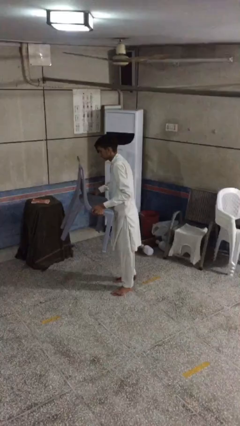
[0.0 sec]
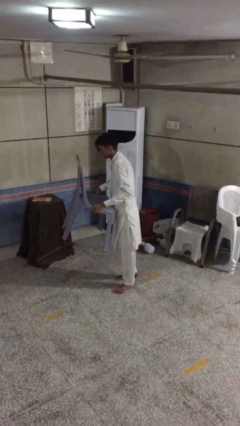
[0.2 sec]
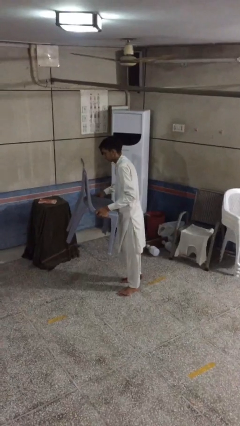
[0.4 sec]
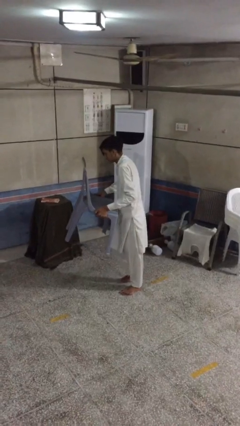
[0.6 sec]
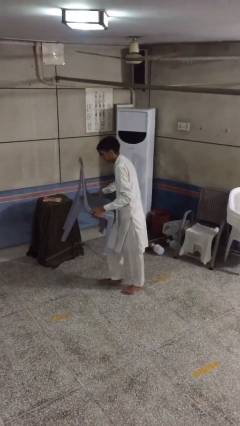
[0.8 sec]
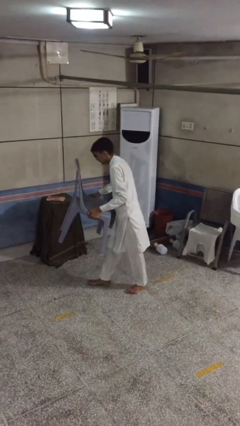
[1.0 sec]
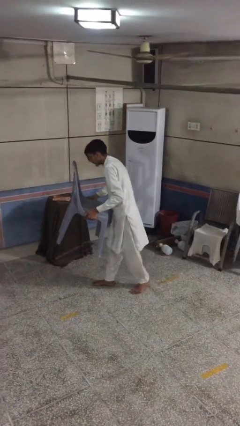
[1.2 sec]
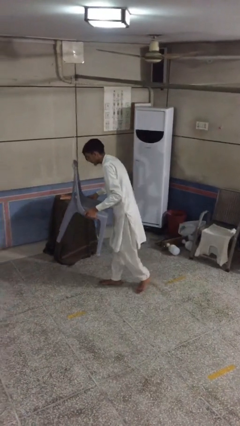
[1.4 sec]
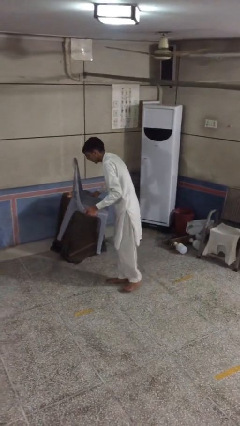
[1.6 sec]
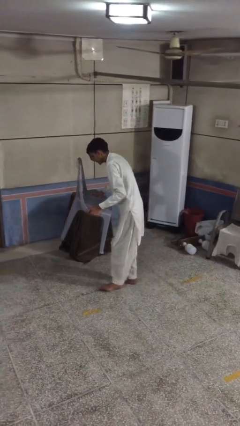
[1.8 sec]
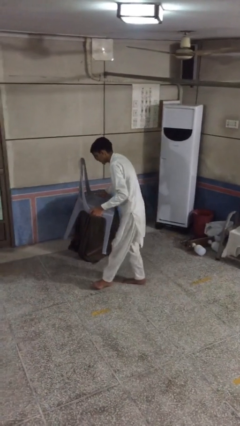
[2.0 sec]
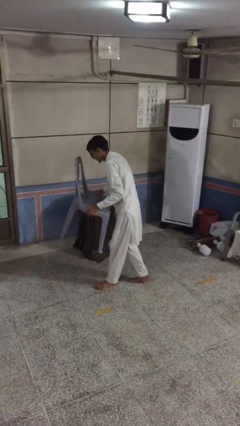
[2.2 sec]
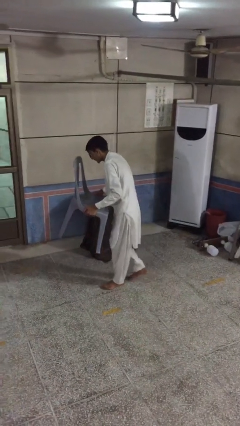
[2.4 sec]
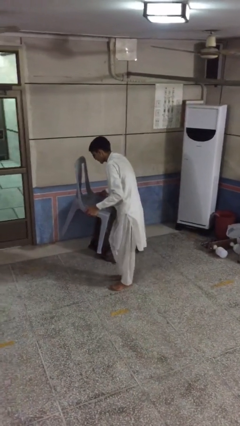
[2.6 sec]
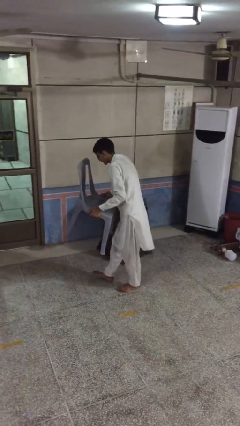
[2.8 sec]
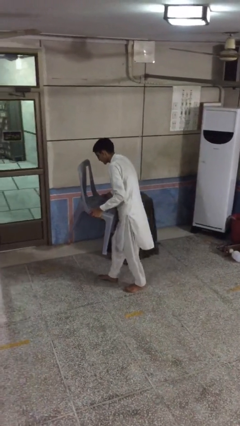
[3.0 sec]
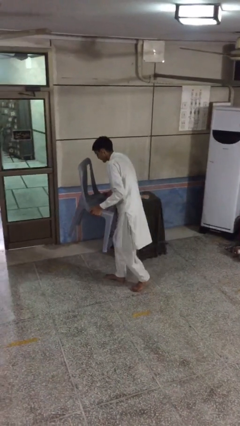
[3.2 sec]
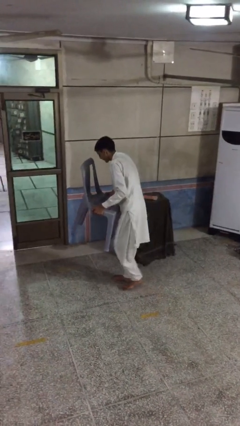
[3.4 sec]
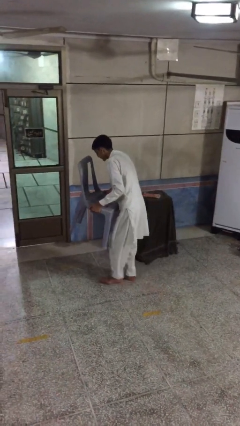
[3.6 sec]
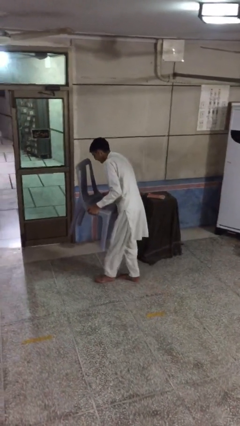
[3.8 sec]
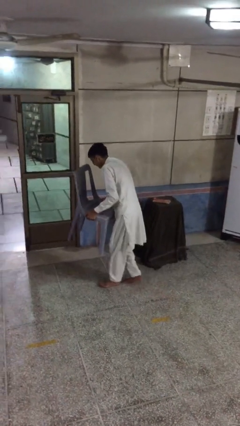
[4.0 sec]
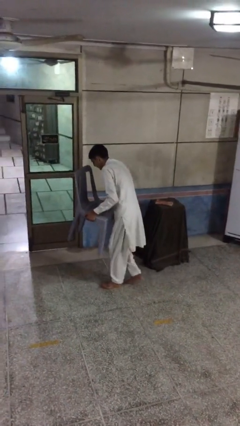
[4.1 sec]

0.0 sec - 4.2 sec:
person carries heavy object

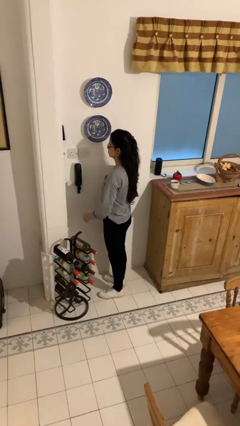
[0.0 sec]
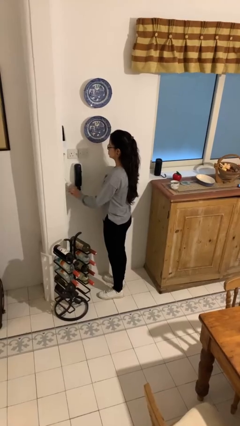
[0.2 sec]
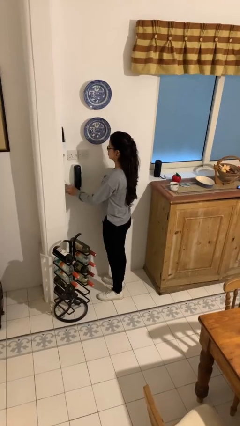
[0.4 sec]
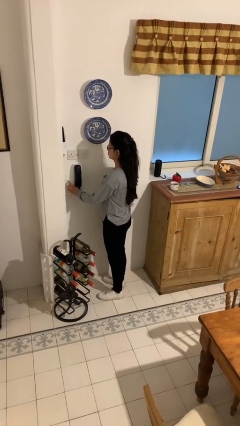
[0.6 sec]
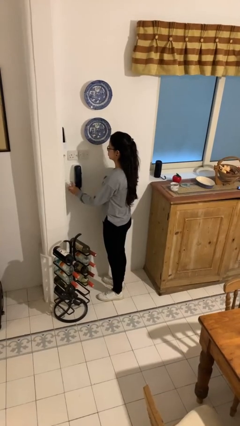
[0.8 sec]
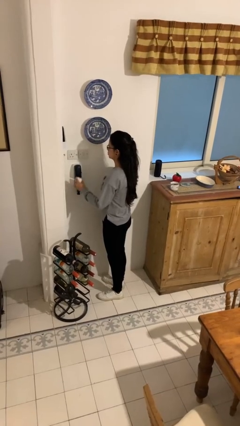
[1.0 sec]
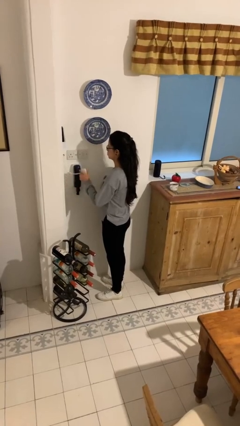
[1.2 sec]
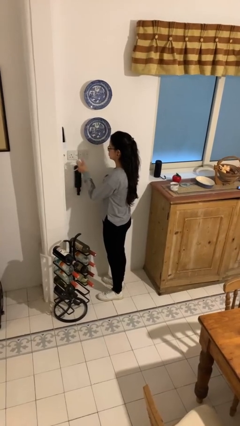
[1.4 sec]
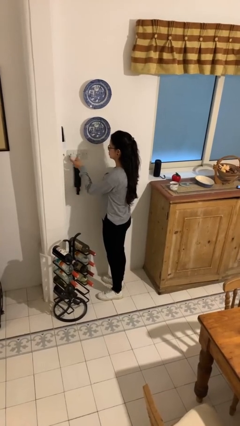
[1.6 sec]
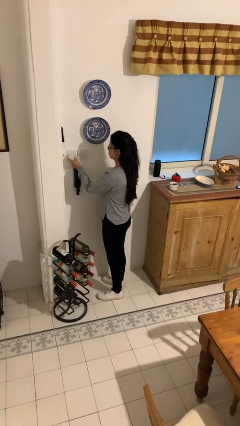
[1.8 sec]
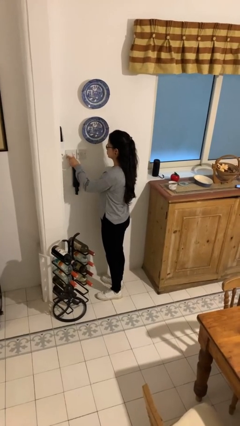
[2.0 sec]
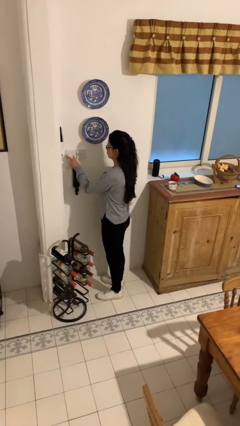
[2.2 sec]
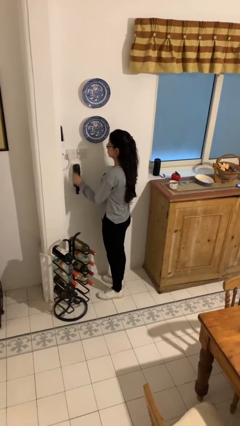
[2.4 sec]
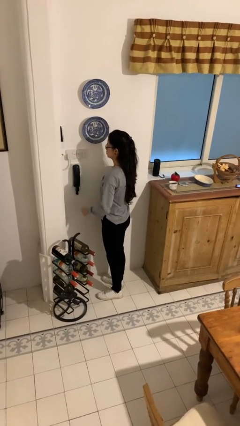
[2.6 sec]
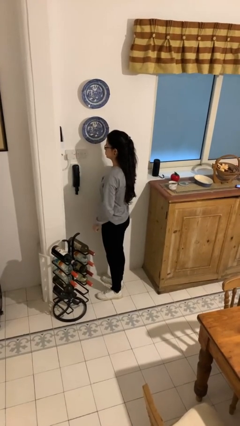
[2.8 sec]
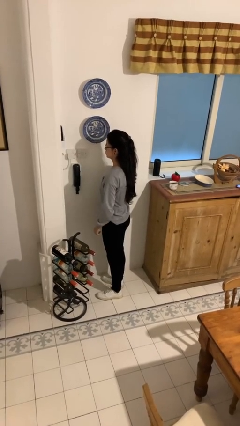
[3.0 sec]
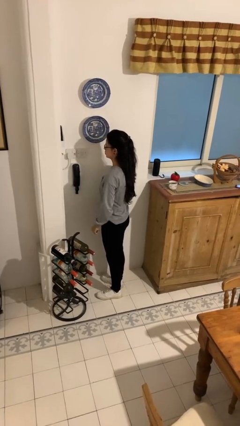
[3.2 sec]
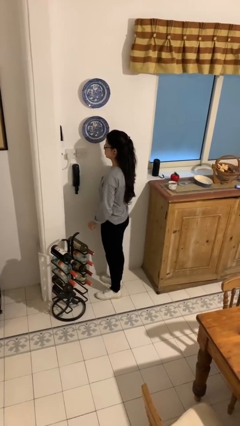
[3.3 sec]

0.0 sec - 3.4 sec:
person plugs into electrical socket

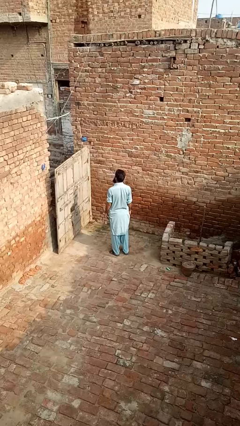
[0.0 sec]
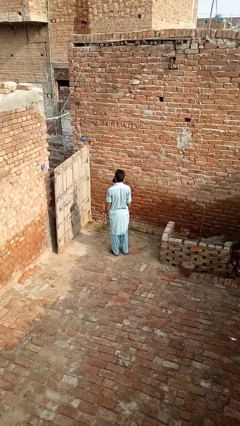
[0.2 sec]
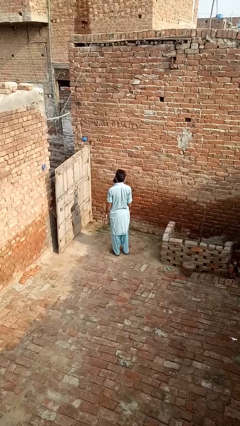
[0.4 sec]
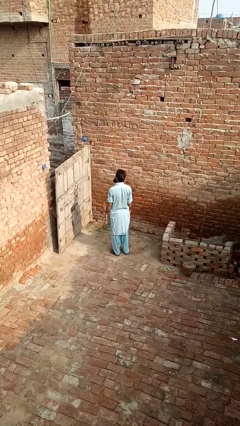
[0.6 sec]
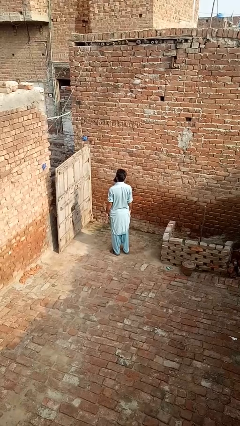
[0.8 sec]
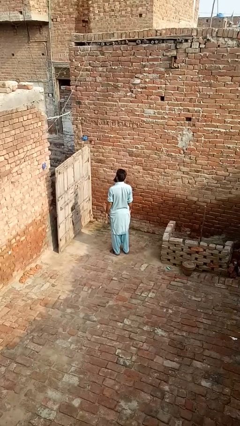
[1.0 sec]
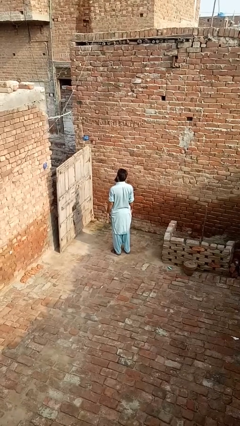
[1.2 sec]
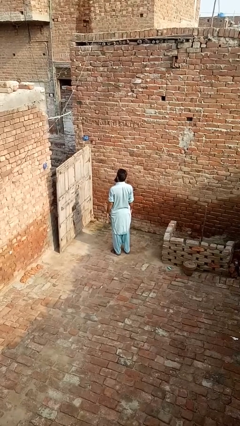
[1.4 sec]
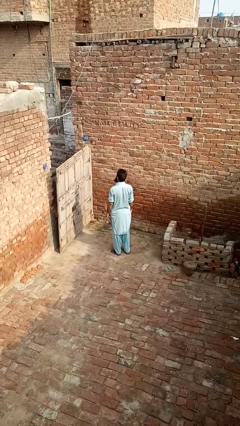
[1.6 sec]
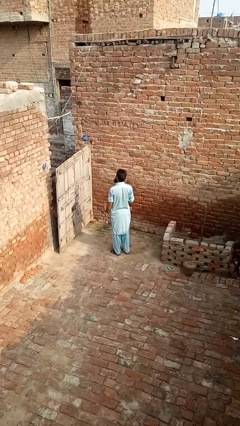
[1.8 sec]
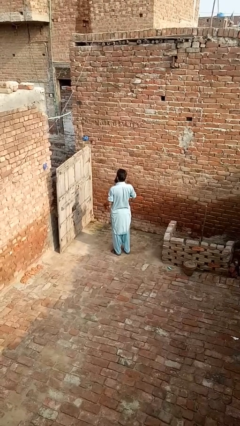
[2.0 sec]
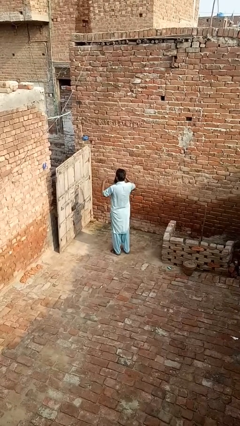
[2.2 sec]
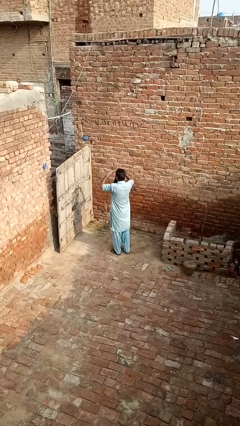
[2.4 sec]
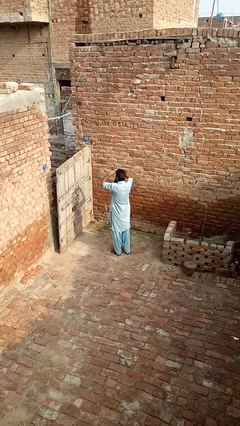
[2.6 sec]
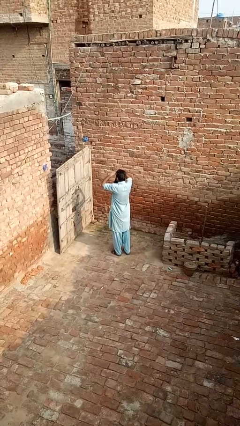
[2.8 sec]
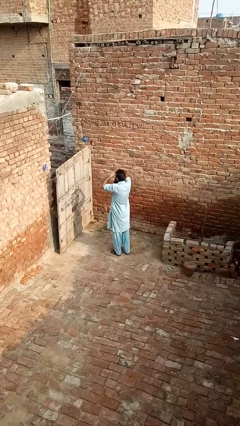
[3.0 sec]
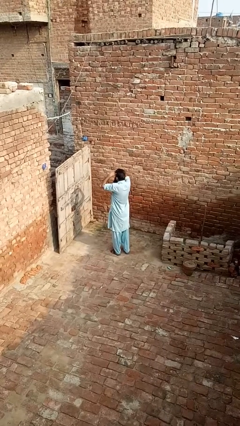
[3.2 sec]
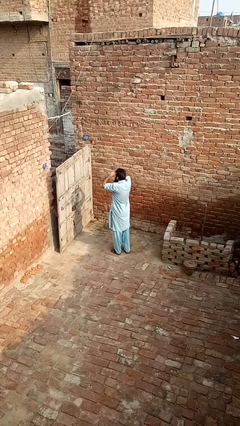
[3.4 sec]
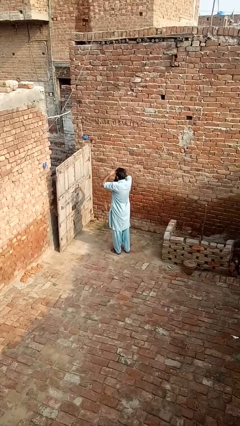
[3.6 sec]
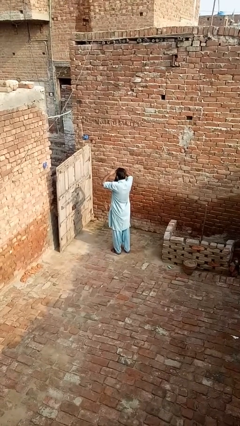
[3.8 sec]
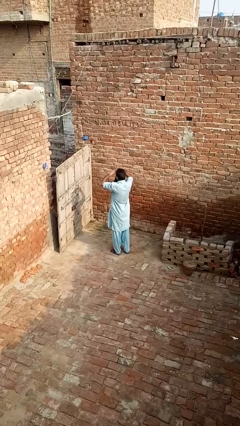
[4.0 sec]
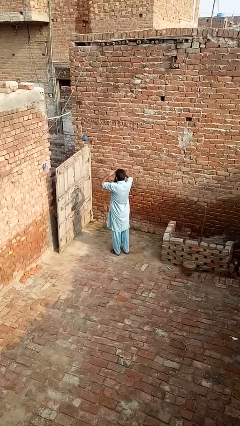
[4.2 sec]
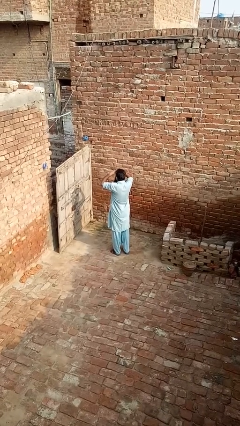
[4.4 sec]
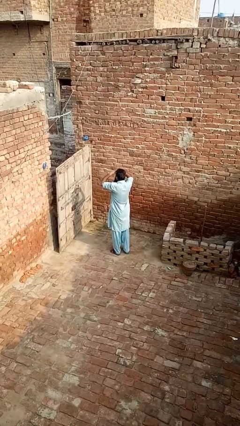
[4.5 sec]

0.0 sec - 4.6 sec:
person shades eyes

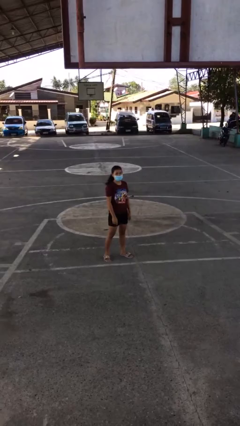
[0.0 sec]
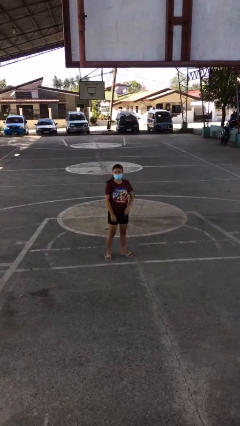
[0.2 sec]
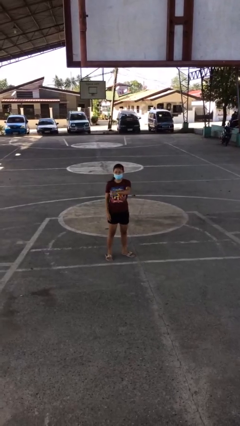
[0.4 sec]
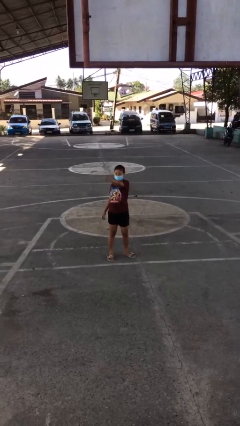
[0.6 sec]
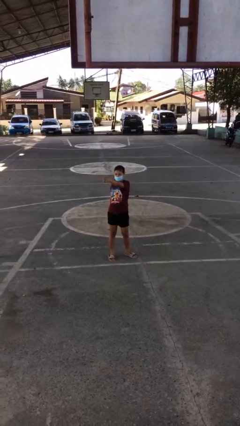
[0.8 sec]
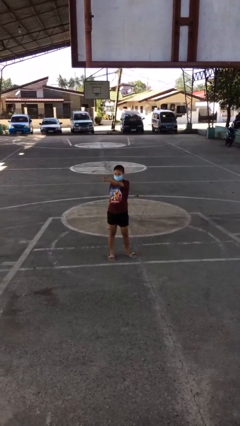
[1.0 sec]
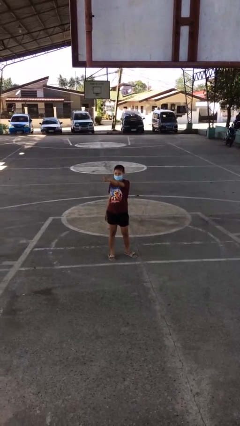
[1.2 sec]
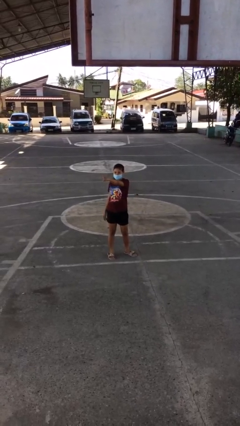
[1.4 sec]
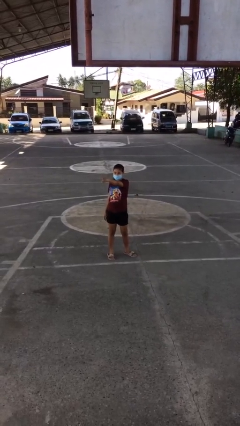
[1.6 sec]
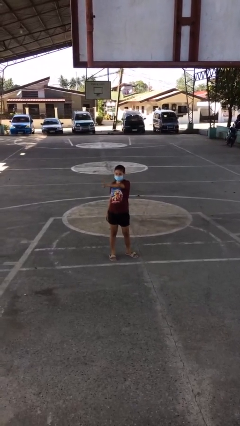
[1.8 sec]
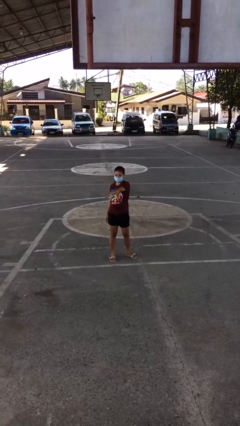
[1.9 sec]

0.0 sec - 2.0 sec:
person points at person

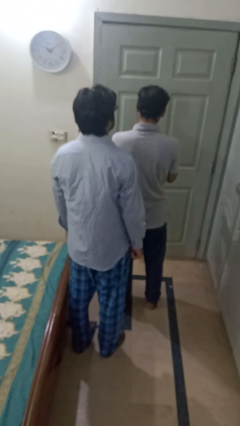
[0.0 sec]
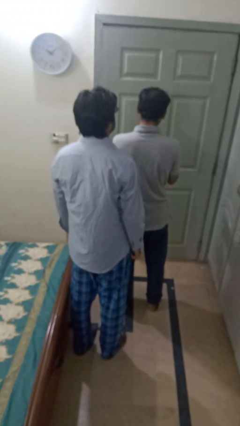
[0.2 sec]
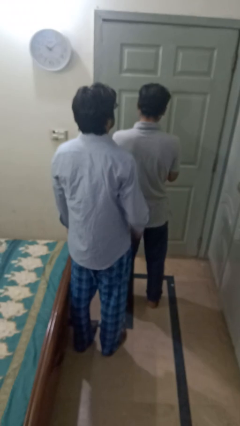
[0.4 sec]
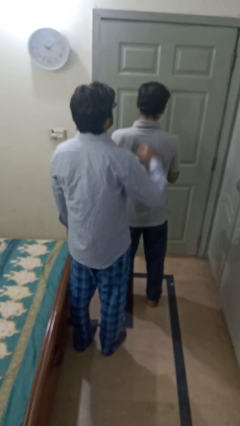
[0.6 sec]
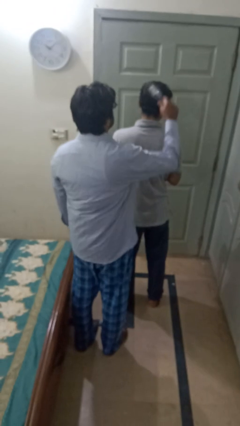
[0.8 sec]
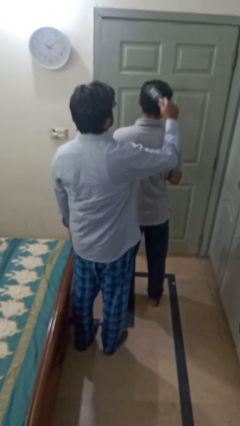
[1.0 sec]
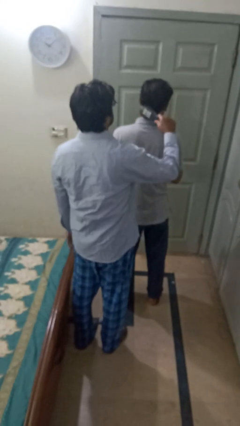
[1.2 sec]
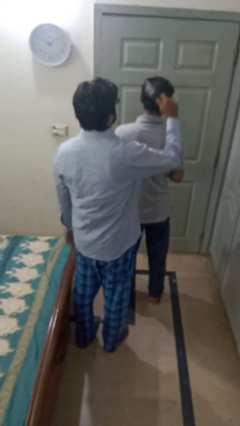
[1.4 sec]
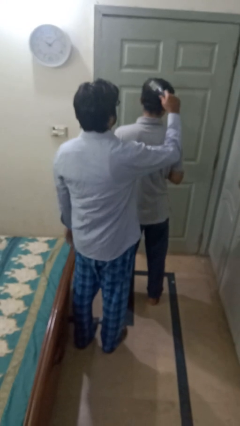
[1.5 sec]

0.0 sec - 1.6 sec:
person brushes hair of person

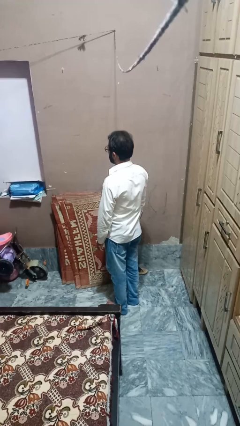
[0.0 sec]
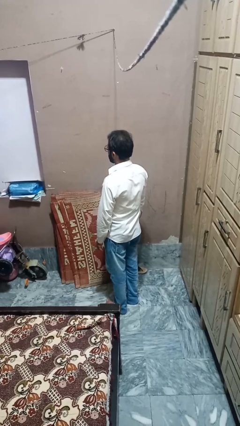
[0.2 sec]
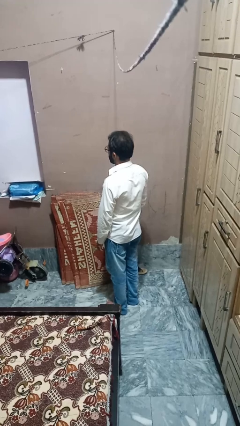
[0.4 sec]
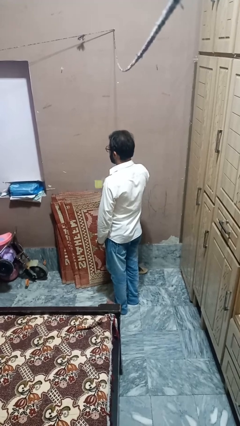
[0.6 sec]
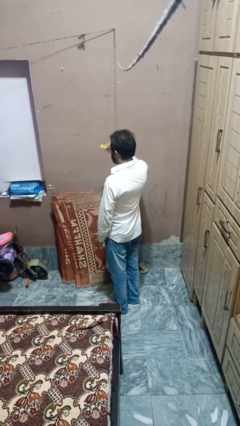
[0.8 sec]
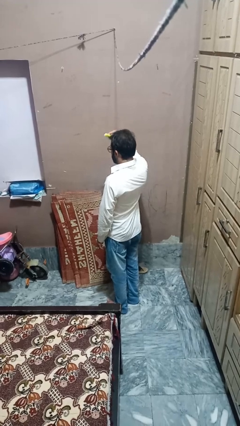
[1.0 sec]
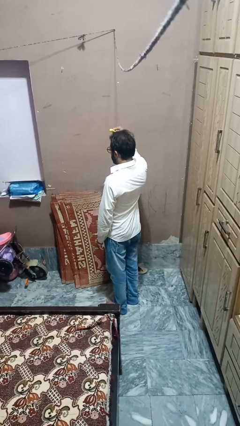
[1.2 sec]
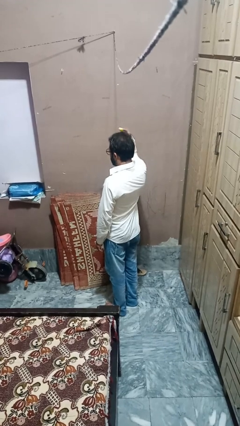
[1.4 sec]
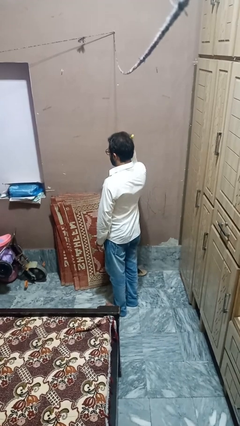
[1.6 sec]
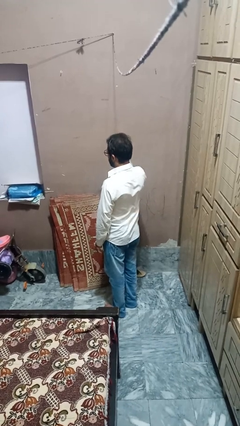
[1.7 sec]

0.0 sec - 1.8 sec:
person brushes hair
